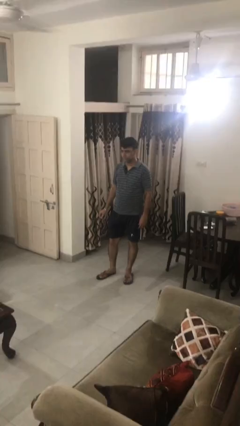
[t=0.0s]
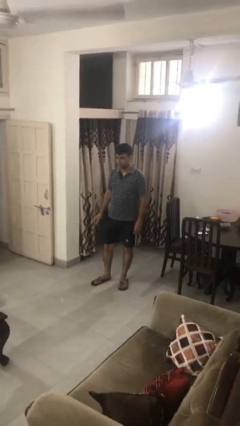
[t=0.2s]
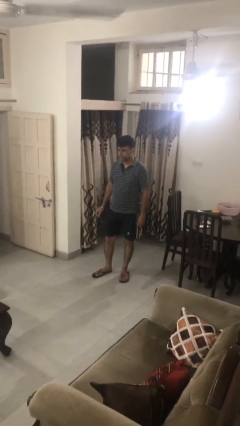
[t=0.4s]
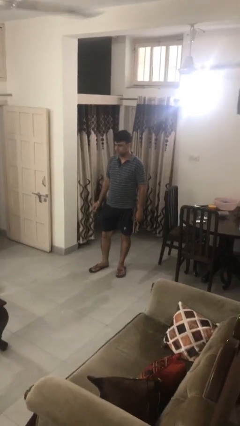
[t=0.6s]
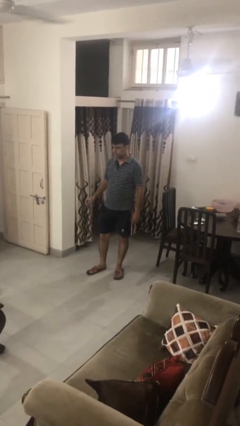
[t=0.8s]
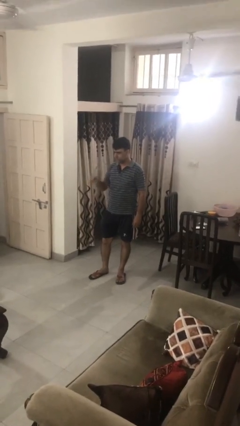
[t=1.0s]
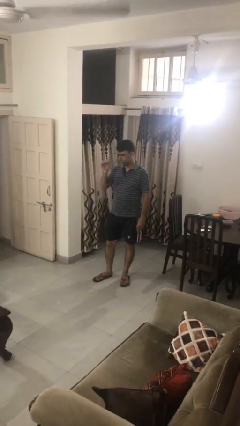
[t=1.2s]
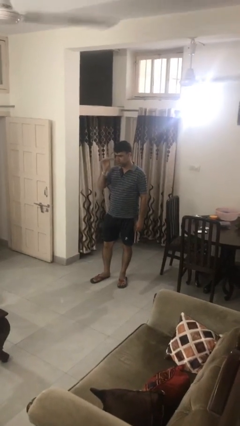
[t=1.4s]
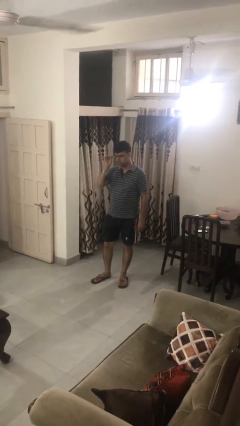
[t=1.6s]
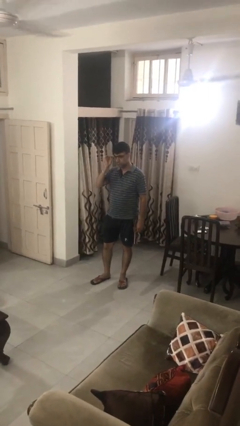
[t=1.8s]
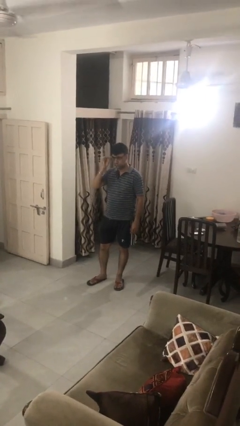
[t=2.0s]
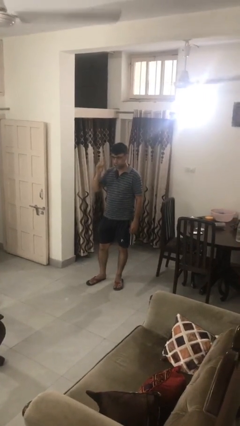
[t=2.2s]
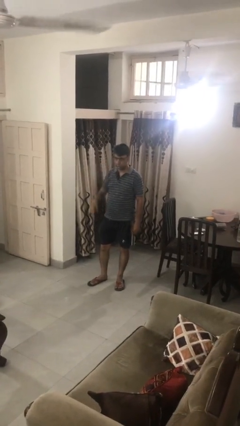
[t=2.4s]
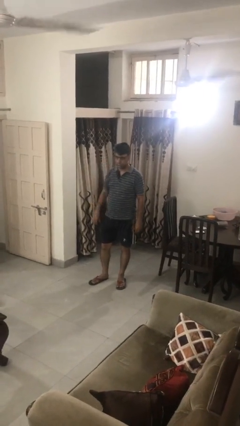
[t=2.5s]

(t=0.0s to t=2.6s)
person puts on glasses

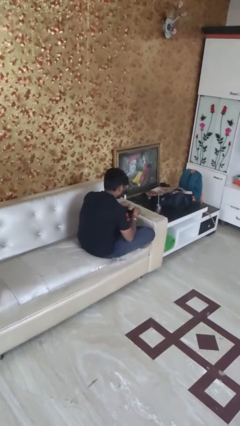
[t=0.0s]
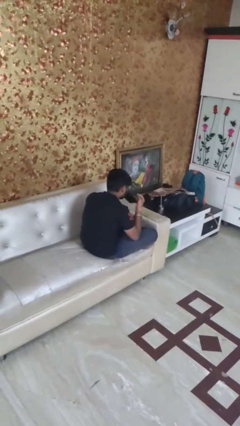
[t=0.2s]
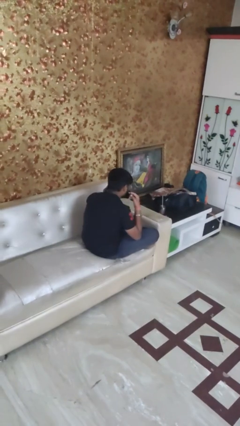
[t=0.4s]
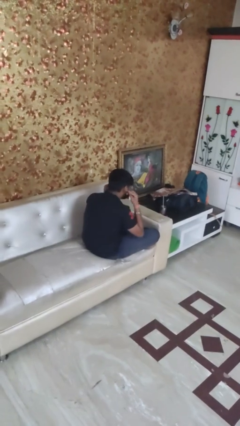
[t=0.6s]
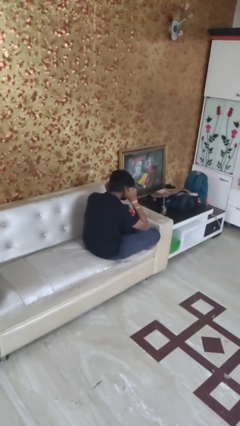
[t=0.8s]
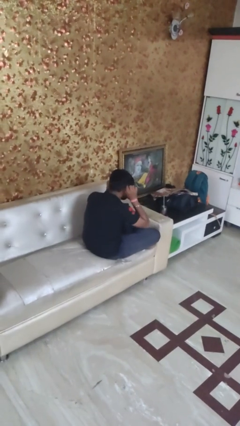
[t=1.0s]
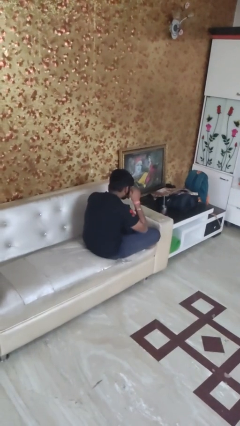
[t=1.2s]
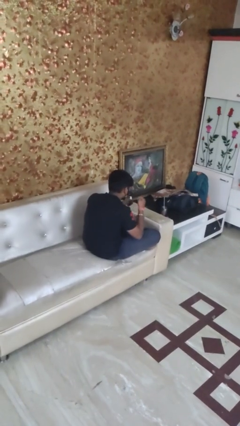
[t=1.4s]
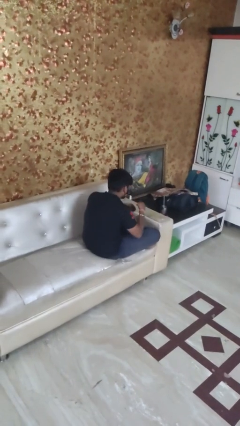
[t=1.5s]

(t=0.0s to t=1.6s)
person puts on facemask

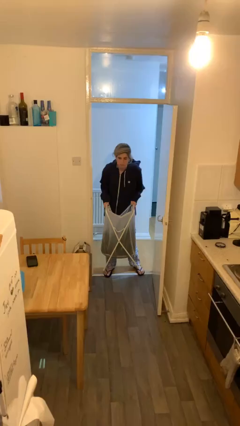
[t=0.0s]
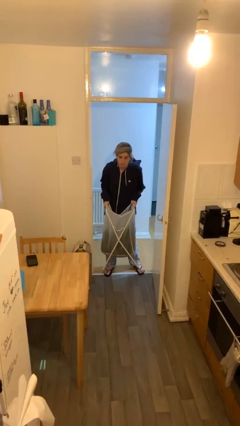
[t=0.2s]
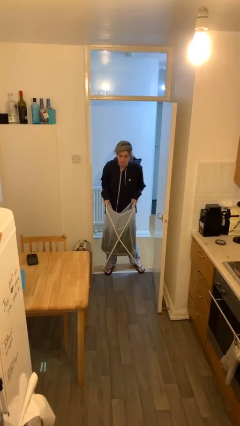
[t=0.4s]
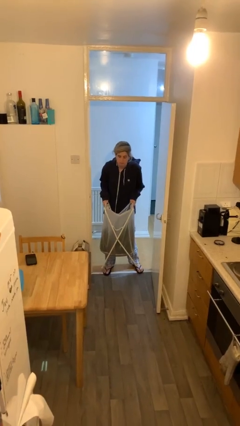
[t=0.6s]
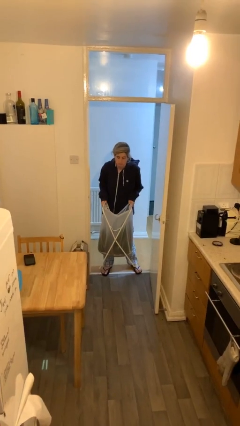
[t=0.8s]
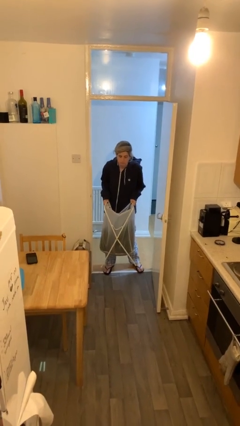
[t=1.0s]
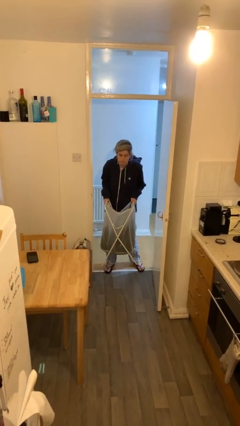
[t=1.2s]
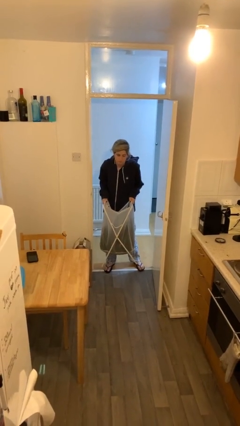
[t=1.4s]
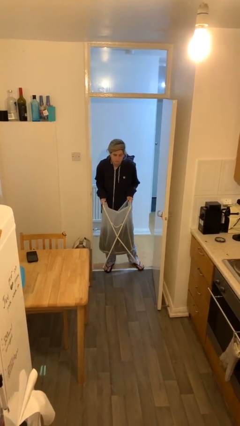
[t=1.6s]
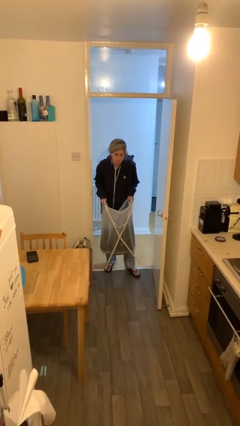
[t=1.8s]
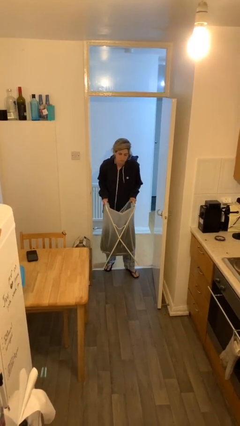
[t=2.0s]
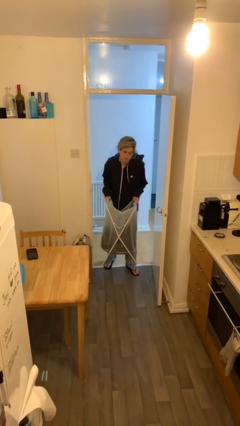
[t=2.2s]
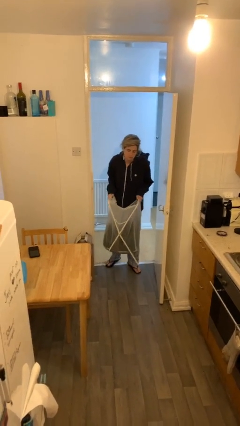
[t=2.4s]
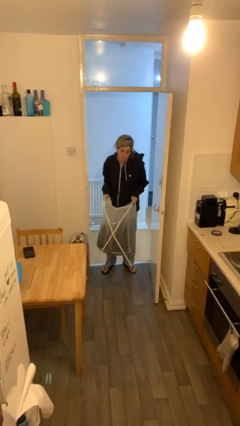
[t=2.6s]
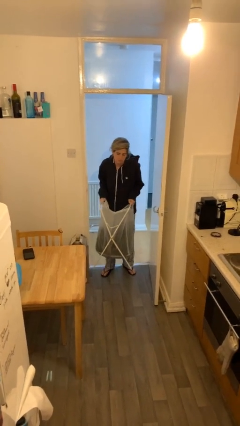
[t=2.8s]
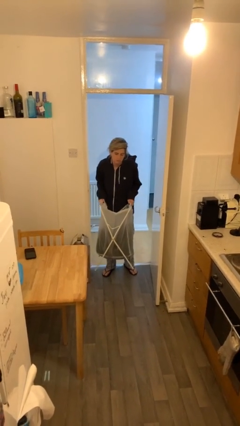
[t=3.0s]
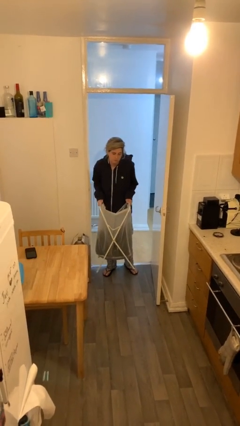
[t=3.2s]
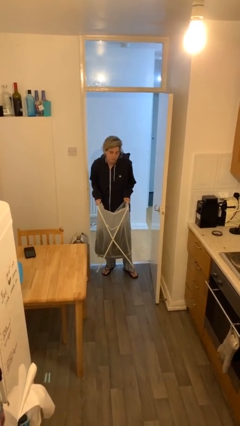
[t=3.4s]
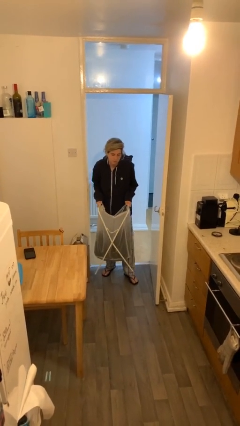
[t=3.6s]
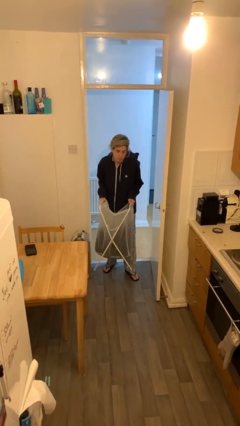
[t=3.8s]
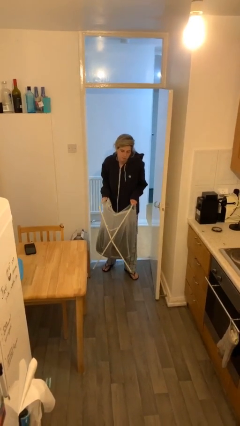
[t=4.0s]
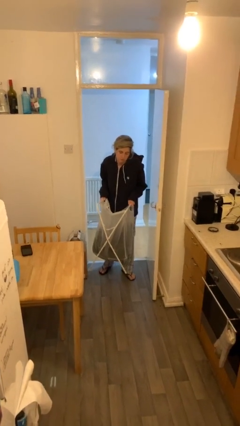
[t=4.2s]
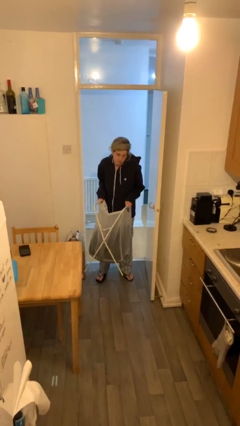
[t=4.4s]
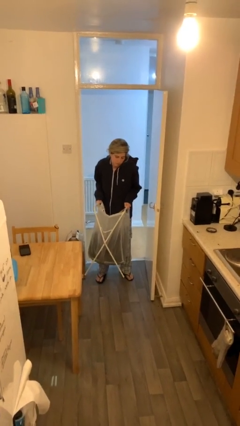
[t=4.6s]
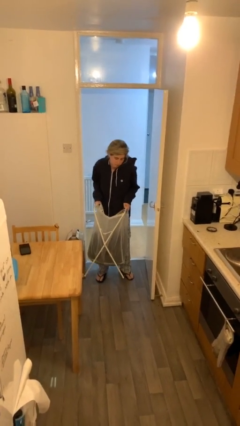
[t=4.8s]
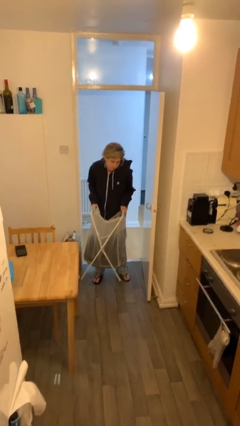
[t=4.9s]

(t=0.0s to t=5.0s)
person carries heavy object

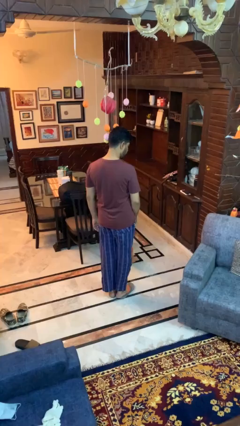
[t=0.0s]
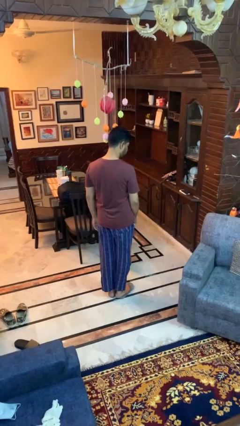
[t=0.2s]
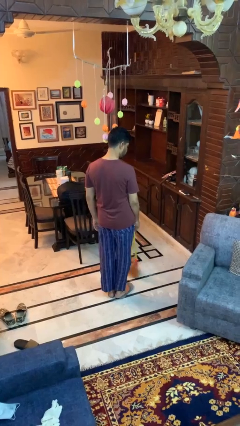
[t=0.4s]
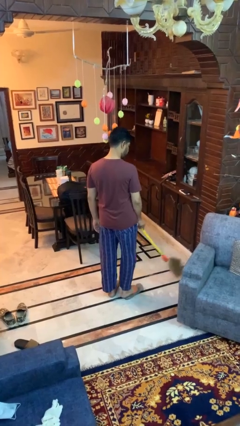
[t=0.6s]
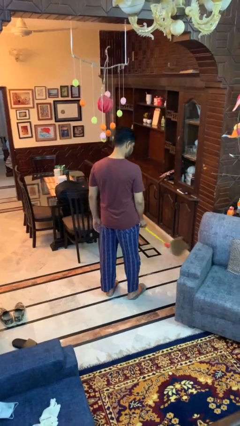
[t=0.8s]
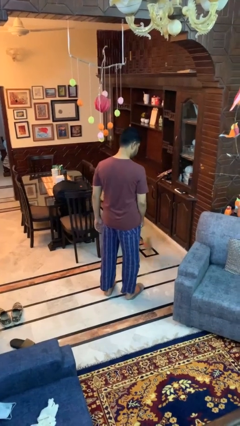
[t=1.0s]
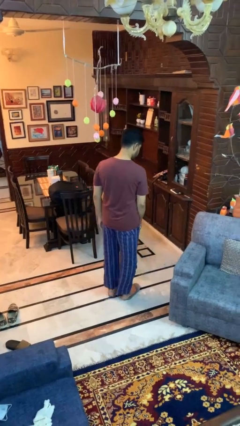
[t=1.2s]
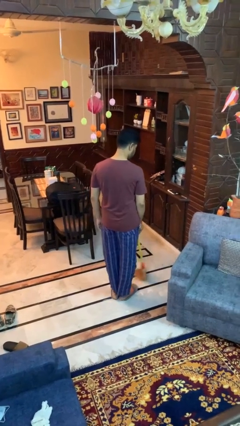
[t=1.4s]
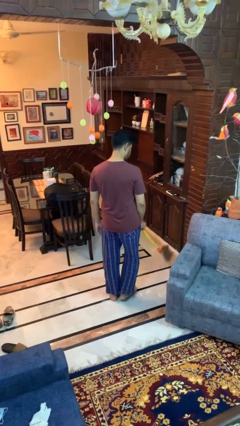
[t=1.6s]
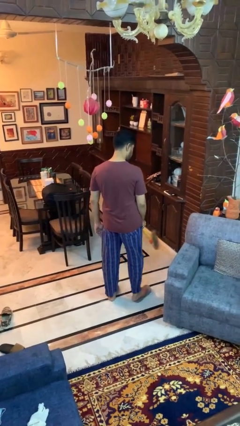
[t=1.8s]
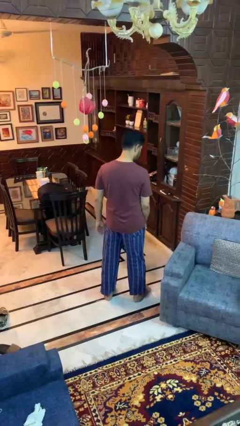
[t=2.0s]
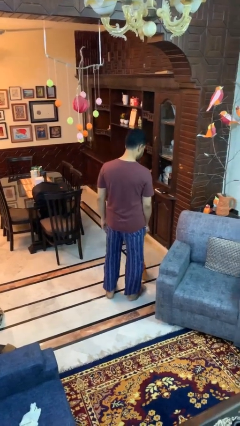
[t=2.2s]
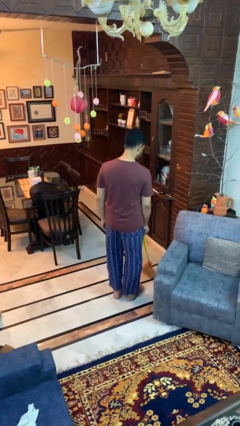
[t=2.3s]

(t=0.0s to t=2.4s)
person sweeps floor

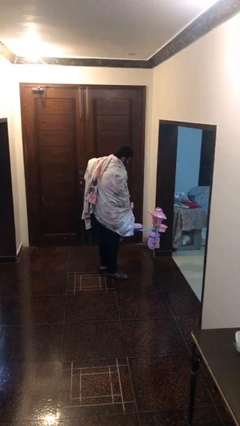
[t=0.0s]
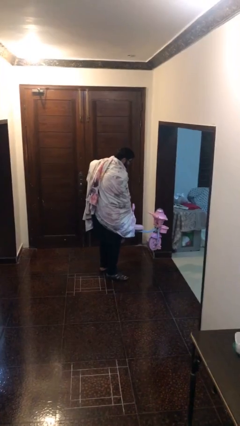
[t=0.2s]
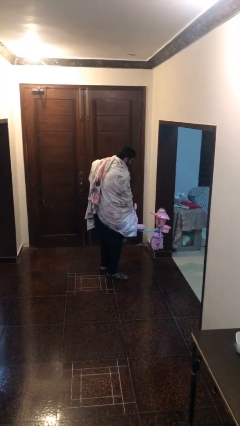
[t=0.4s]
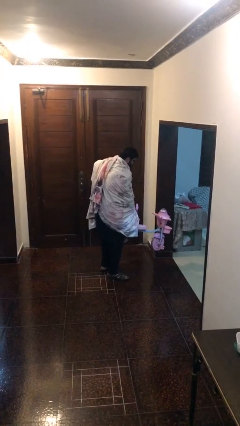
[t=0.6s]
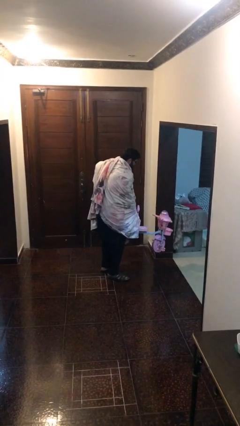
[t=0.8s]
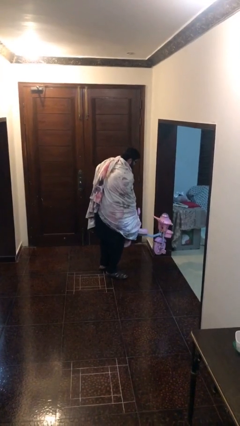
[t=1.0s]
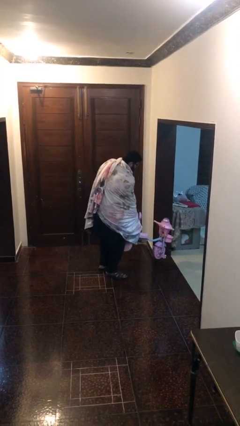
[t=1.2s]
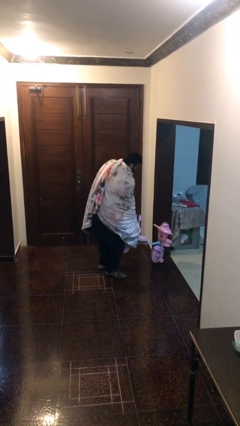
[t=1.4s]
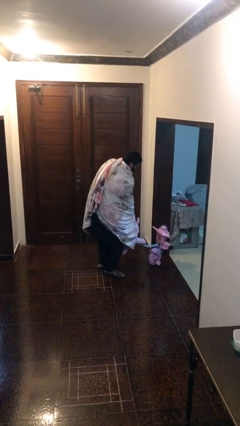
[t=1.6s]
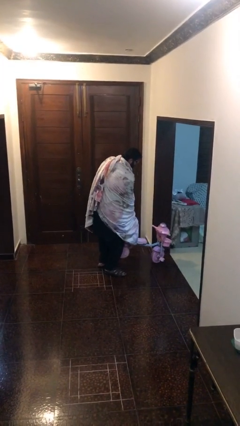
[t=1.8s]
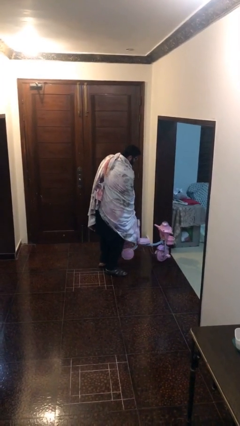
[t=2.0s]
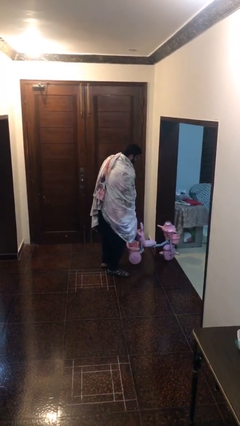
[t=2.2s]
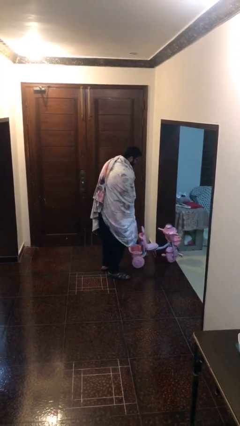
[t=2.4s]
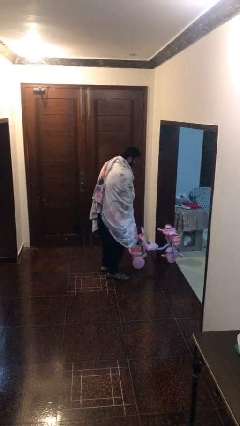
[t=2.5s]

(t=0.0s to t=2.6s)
person puts down object on floor

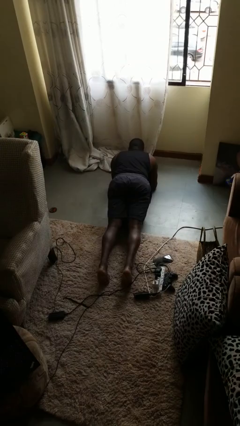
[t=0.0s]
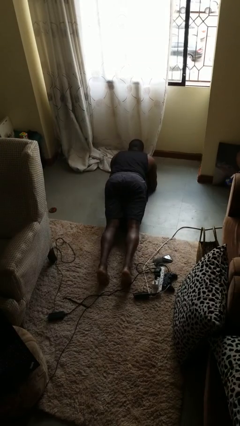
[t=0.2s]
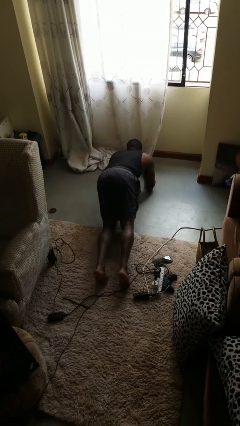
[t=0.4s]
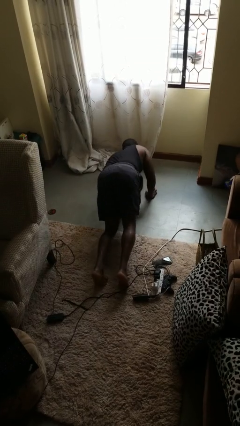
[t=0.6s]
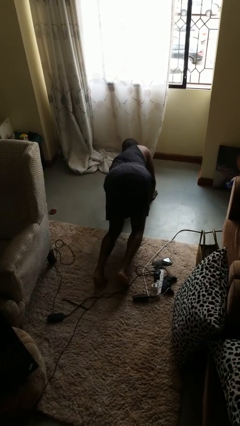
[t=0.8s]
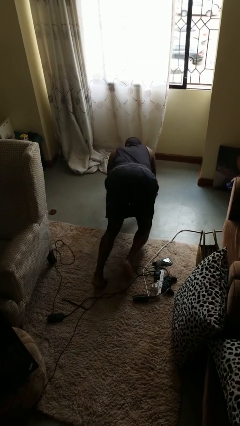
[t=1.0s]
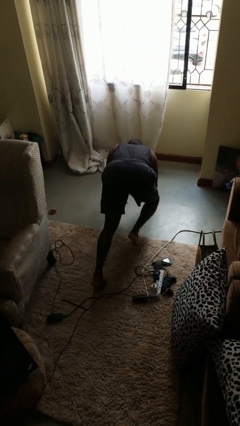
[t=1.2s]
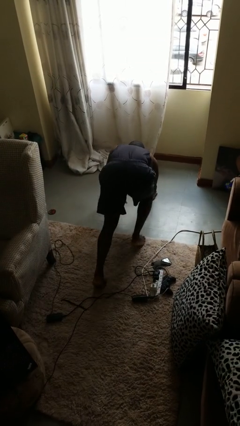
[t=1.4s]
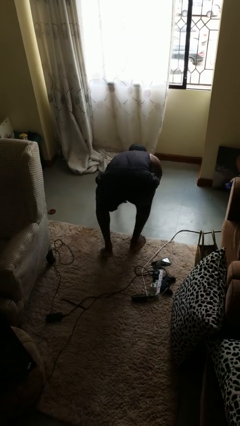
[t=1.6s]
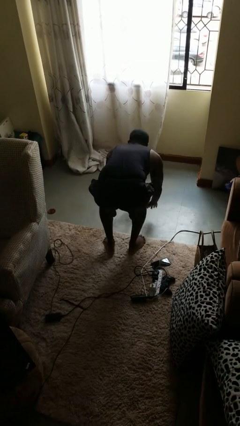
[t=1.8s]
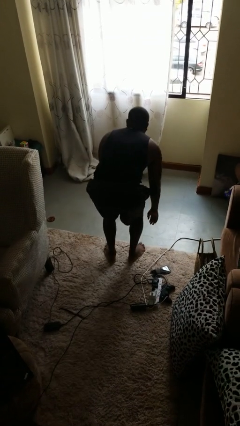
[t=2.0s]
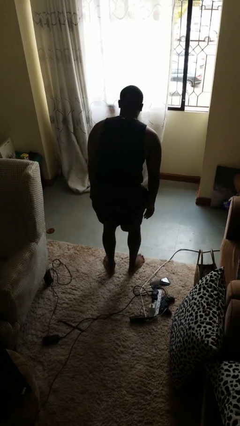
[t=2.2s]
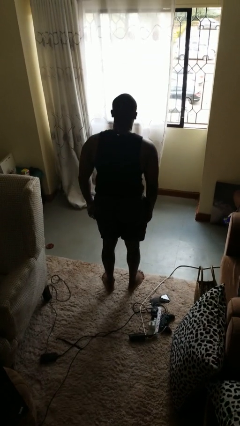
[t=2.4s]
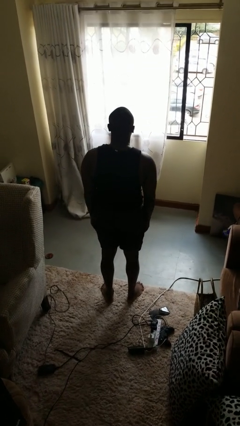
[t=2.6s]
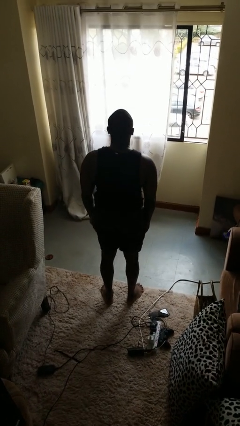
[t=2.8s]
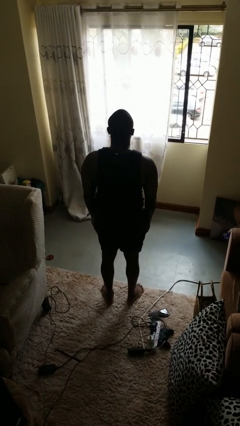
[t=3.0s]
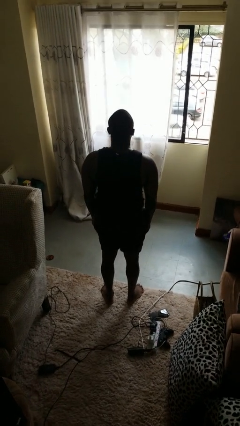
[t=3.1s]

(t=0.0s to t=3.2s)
person stands up from floor
